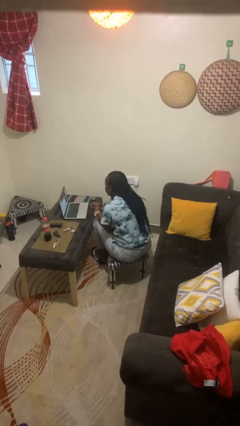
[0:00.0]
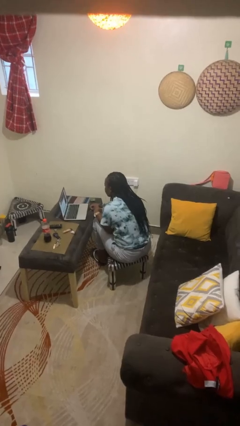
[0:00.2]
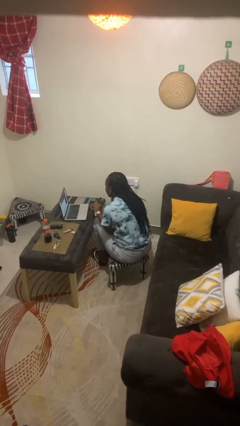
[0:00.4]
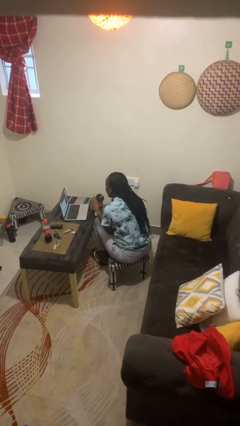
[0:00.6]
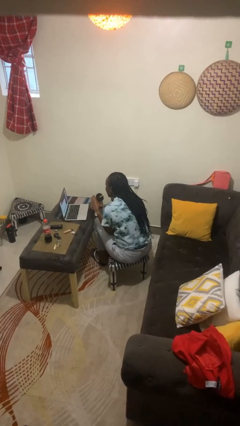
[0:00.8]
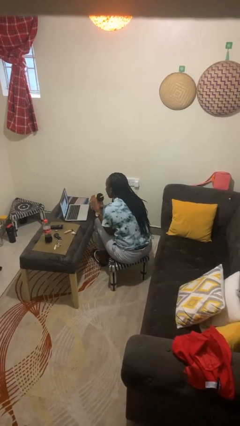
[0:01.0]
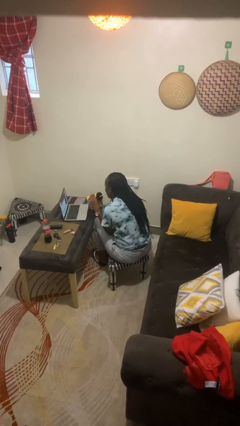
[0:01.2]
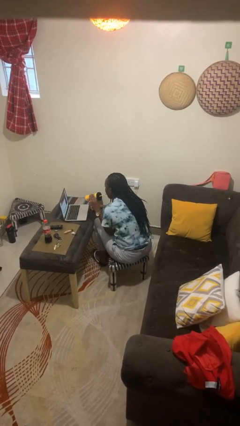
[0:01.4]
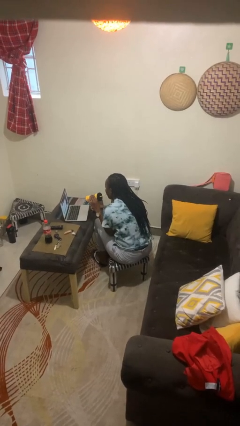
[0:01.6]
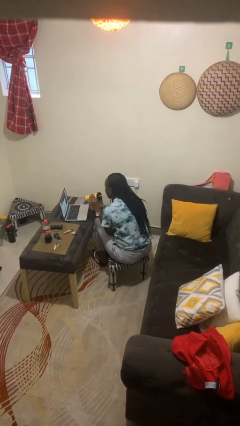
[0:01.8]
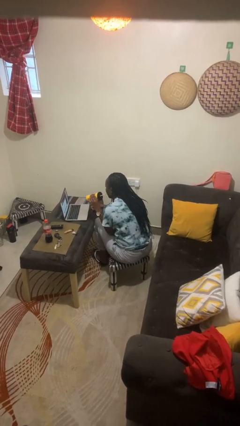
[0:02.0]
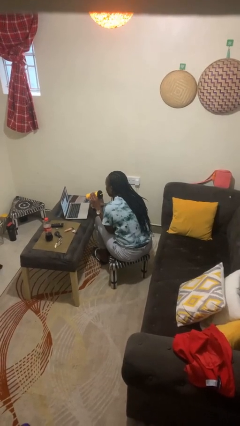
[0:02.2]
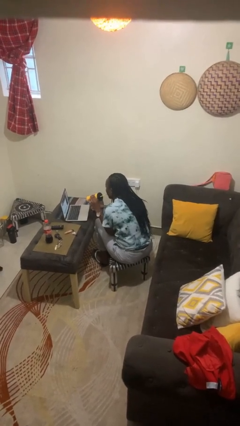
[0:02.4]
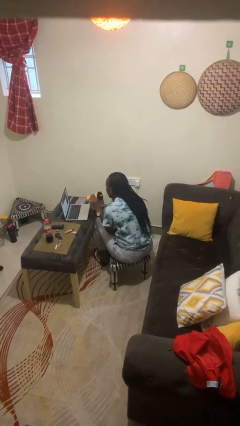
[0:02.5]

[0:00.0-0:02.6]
person drinks from straw

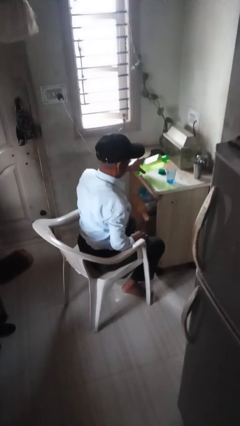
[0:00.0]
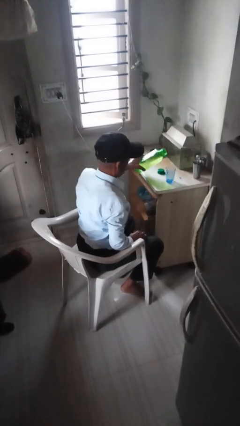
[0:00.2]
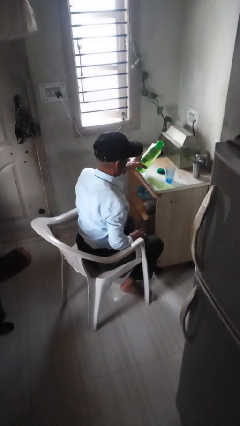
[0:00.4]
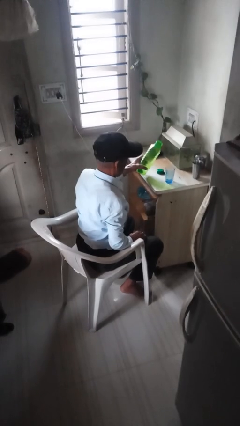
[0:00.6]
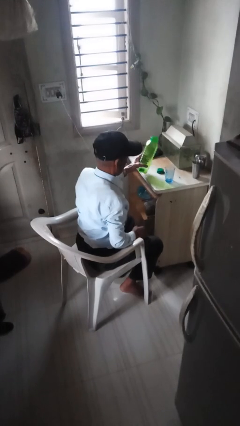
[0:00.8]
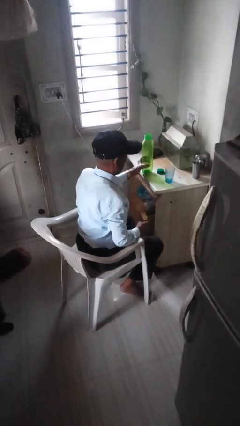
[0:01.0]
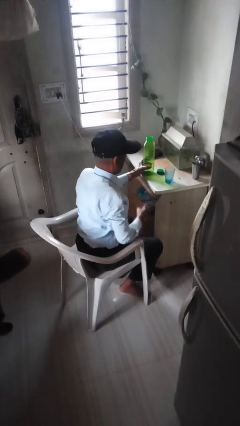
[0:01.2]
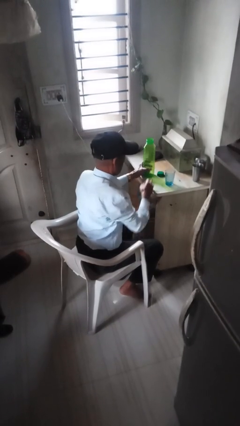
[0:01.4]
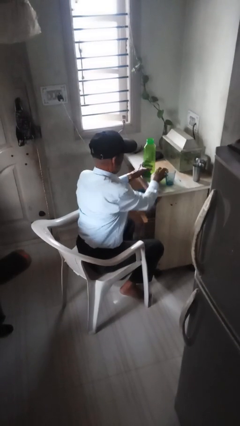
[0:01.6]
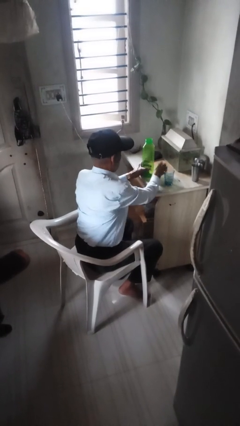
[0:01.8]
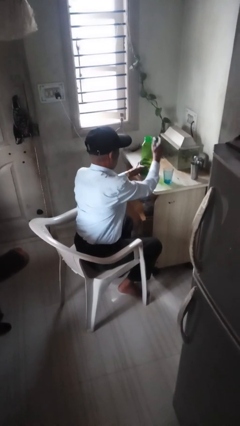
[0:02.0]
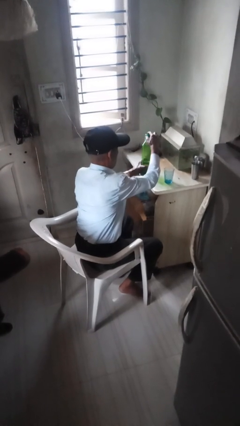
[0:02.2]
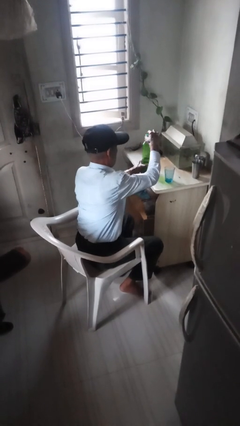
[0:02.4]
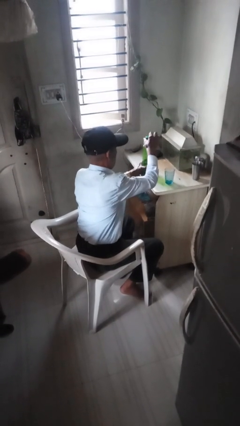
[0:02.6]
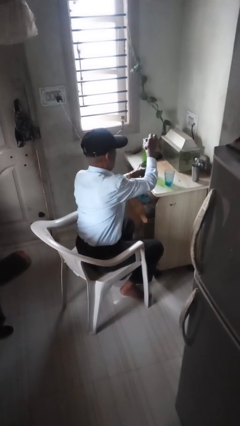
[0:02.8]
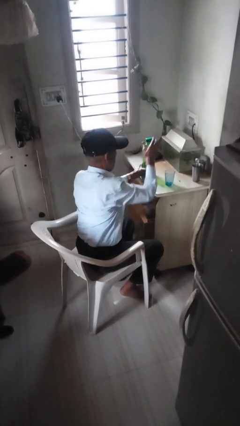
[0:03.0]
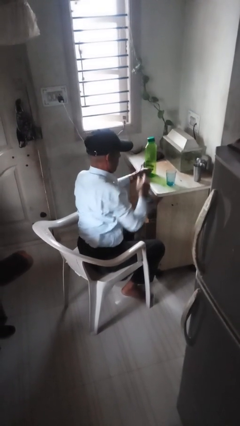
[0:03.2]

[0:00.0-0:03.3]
person screws lid to bottle

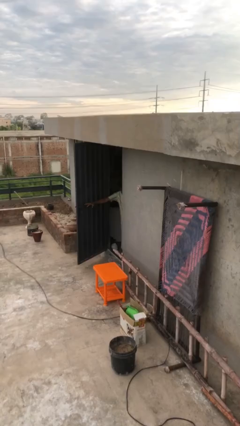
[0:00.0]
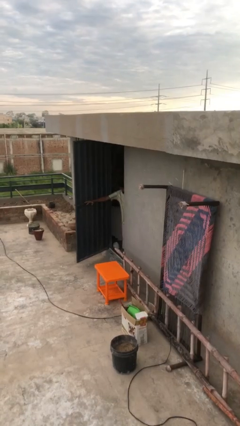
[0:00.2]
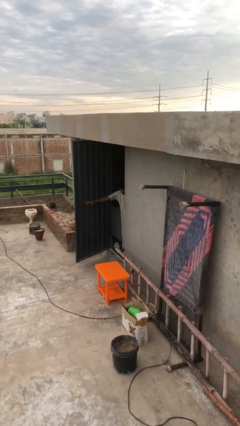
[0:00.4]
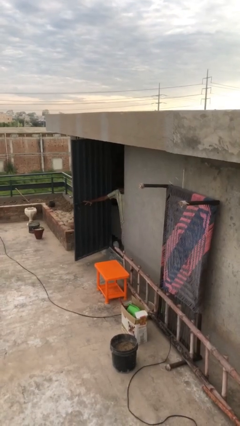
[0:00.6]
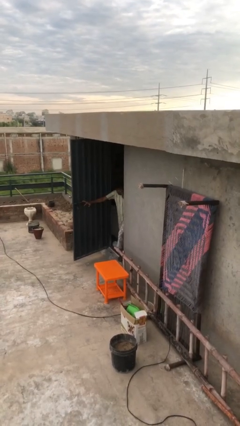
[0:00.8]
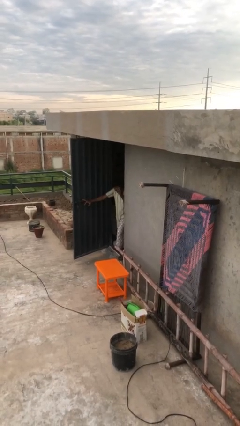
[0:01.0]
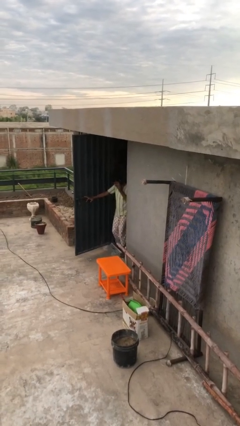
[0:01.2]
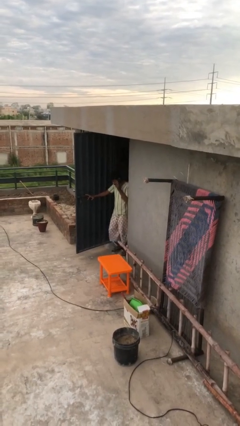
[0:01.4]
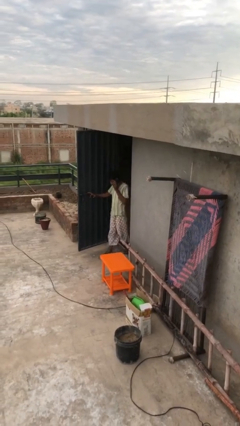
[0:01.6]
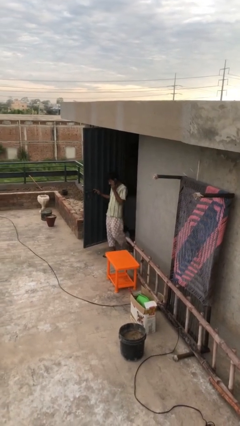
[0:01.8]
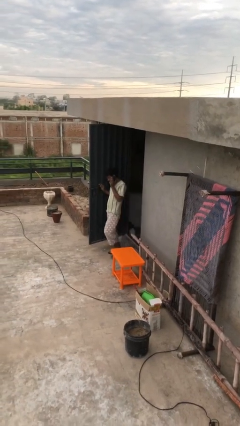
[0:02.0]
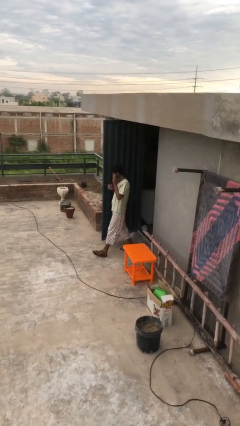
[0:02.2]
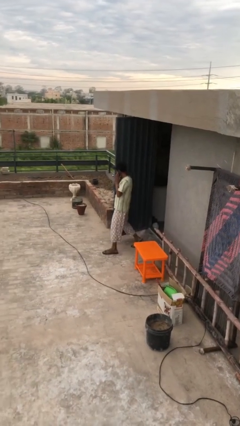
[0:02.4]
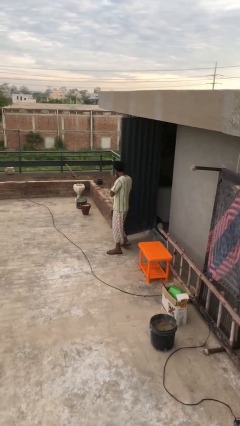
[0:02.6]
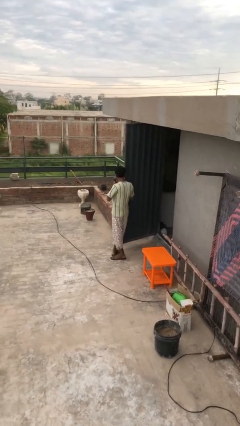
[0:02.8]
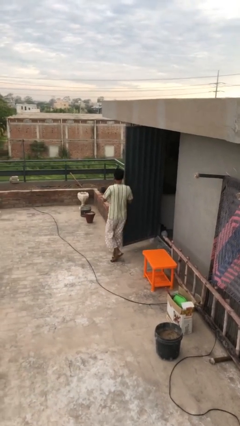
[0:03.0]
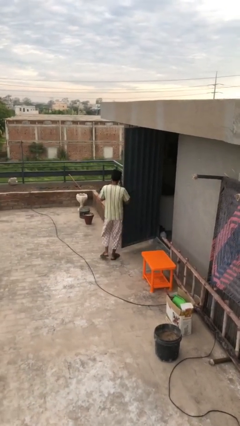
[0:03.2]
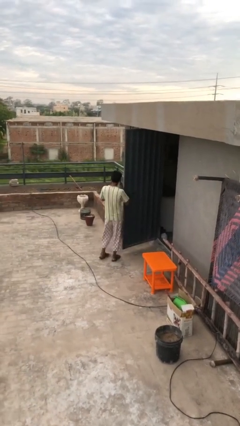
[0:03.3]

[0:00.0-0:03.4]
person enters scene through structure

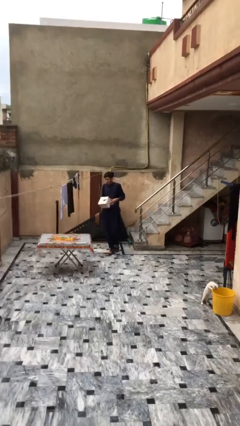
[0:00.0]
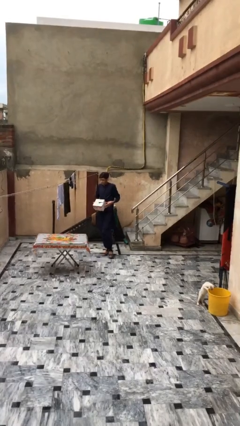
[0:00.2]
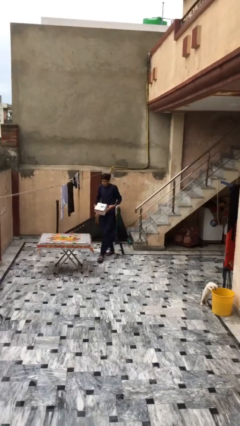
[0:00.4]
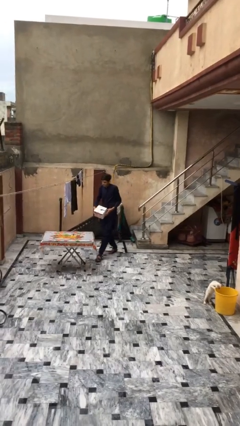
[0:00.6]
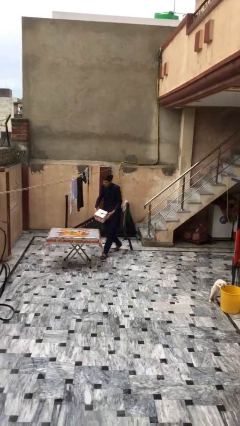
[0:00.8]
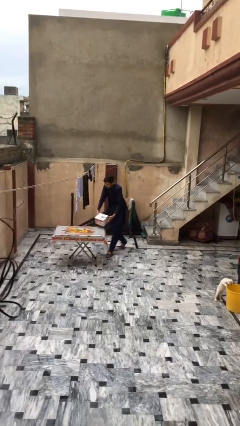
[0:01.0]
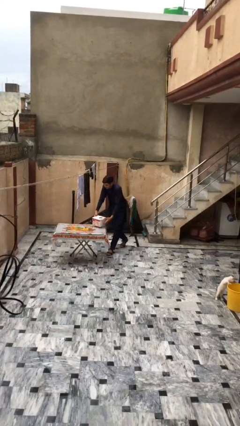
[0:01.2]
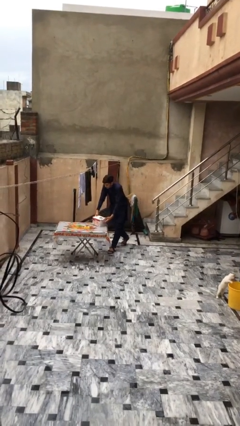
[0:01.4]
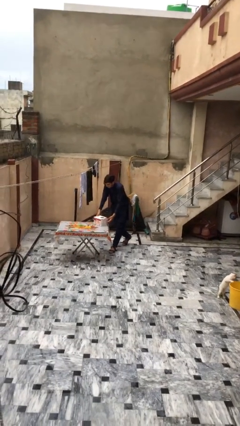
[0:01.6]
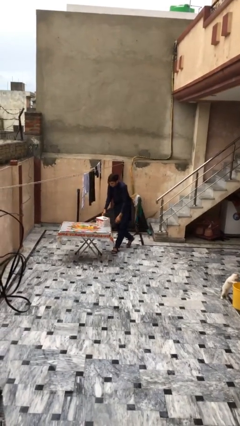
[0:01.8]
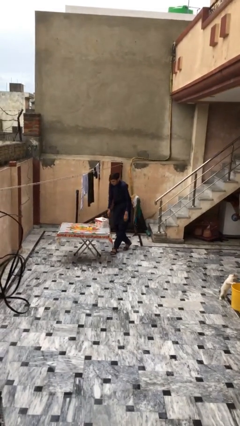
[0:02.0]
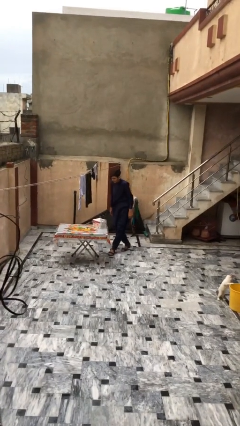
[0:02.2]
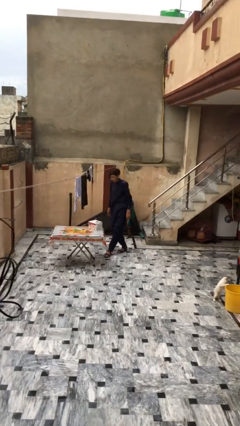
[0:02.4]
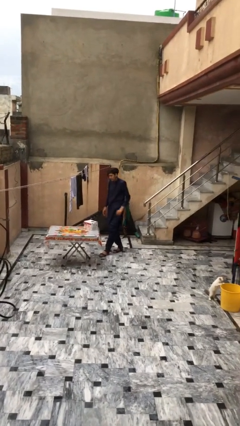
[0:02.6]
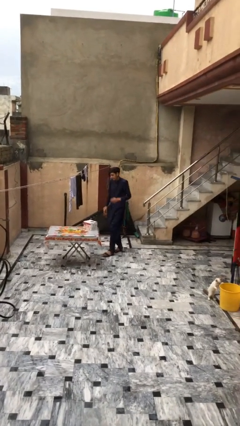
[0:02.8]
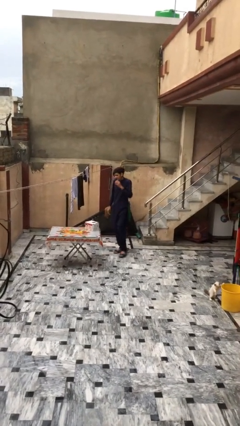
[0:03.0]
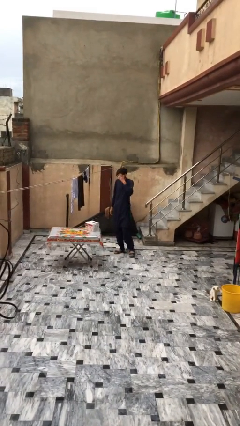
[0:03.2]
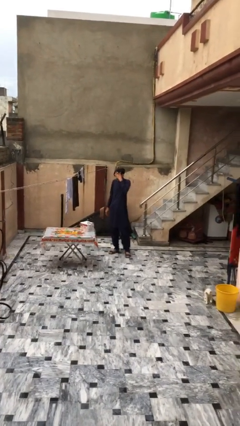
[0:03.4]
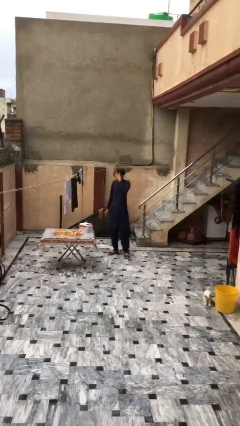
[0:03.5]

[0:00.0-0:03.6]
person puts down object on table

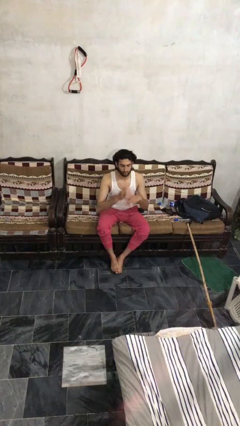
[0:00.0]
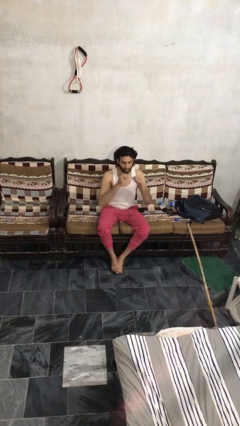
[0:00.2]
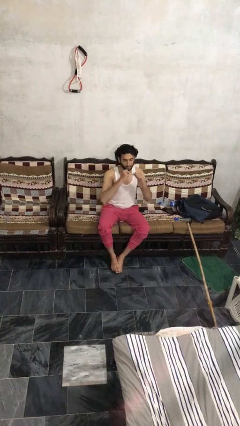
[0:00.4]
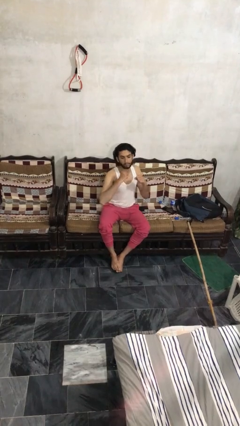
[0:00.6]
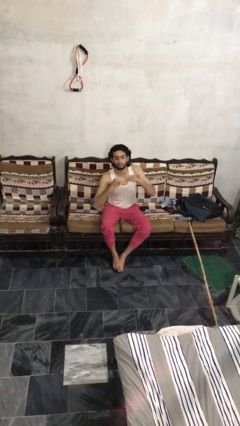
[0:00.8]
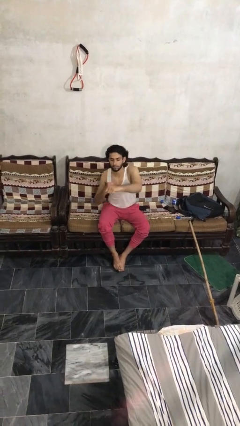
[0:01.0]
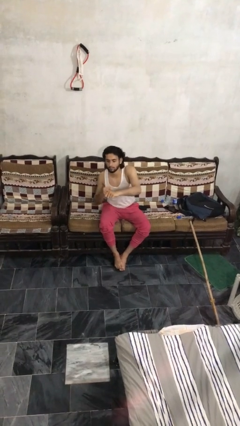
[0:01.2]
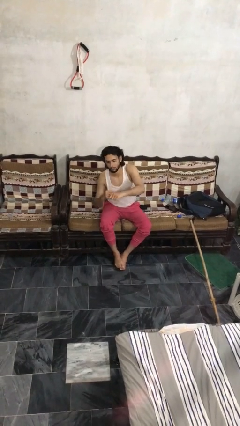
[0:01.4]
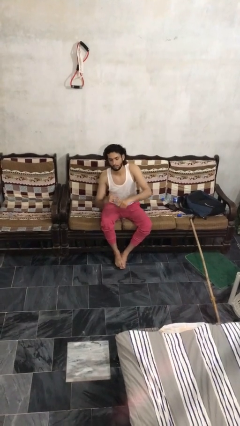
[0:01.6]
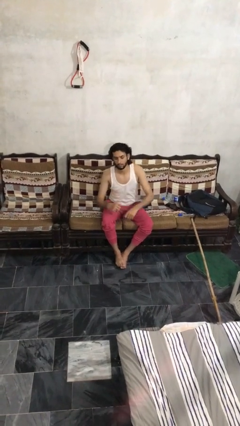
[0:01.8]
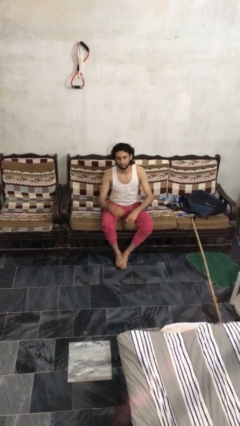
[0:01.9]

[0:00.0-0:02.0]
person punches

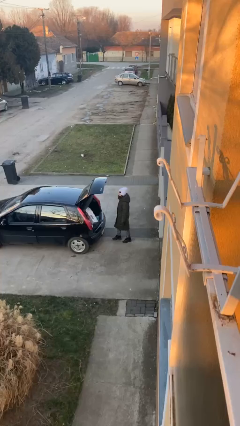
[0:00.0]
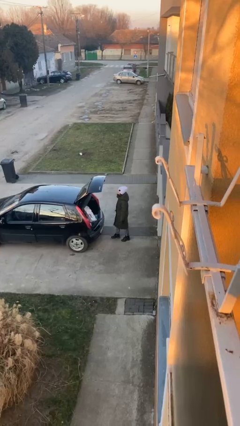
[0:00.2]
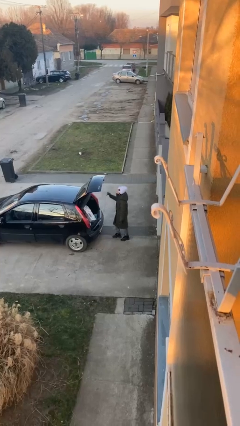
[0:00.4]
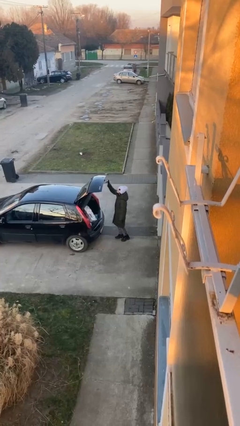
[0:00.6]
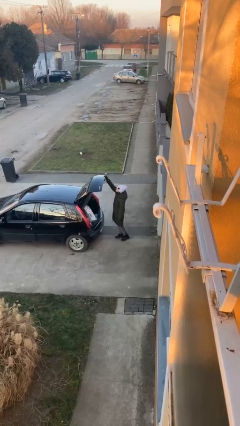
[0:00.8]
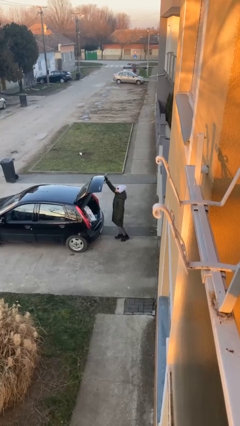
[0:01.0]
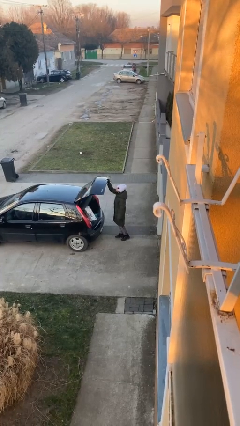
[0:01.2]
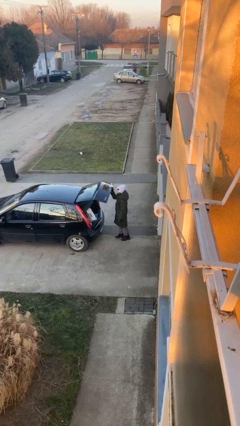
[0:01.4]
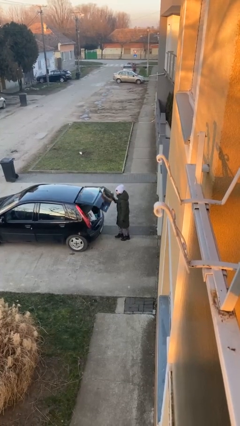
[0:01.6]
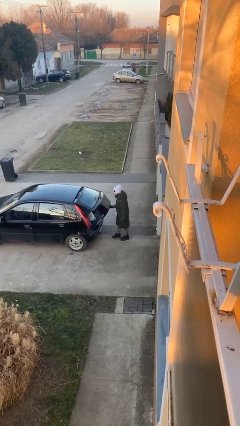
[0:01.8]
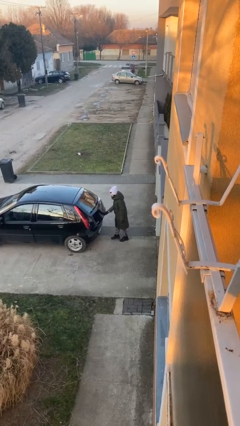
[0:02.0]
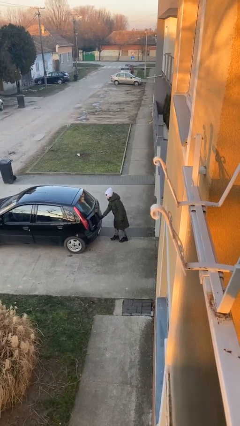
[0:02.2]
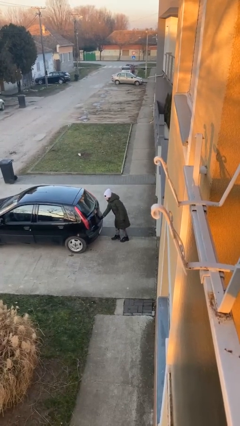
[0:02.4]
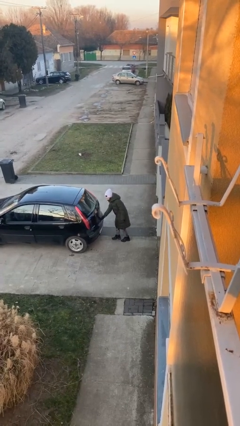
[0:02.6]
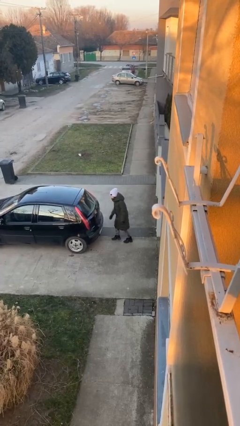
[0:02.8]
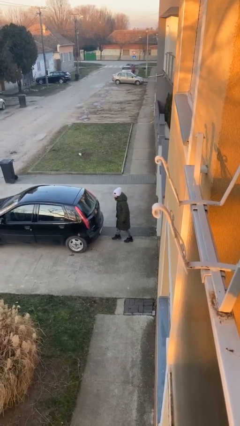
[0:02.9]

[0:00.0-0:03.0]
person closes car trunk
